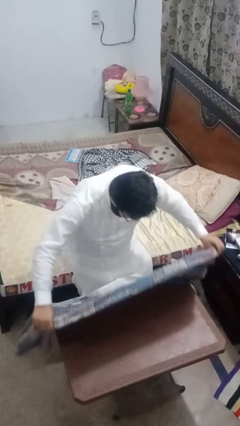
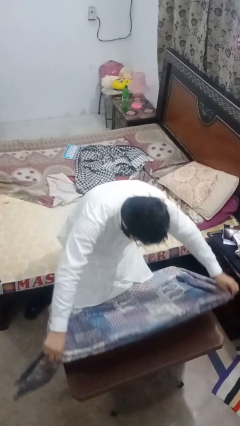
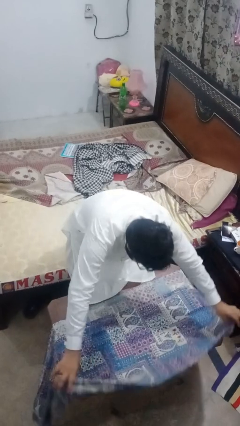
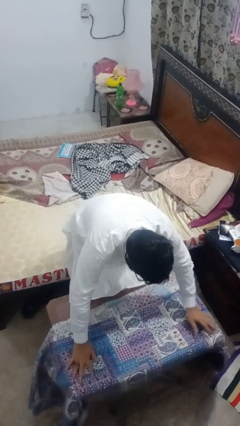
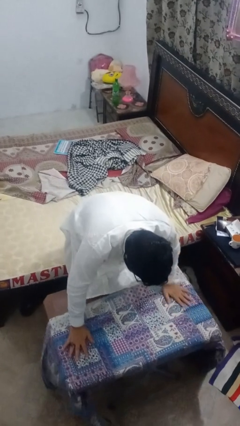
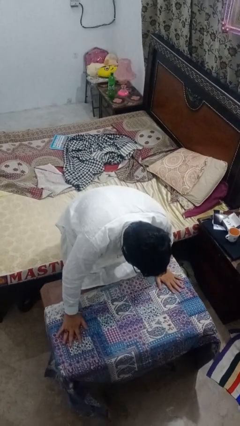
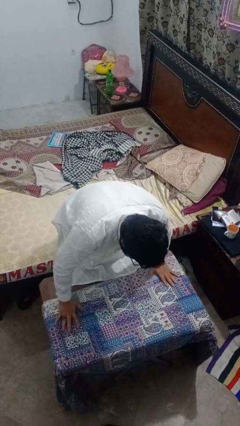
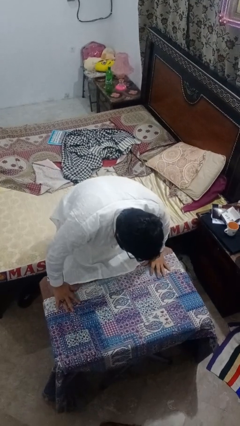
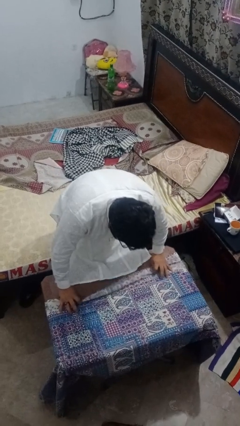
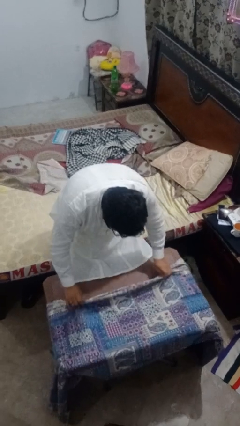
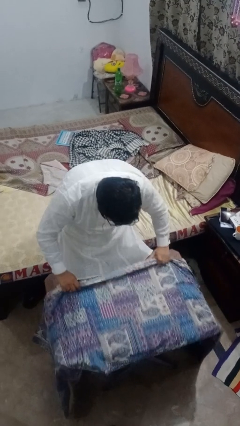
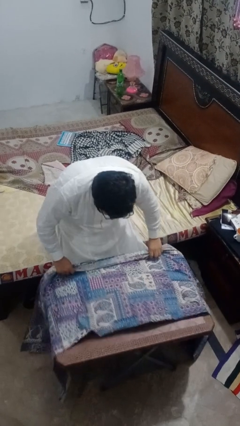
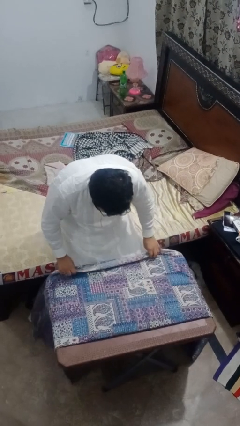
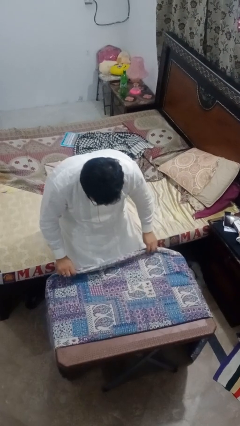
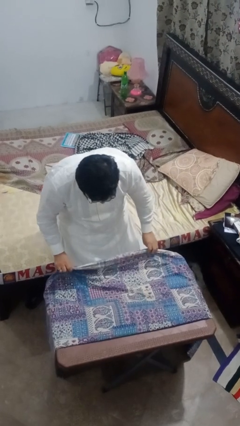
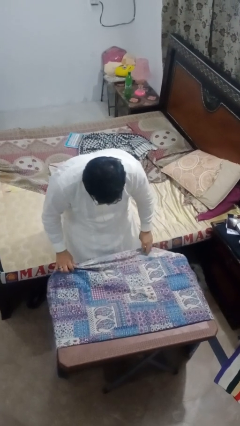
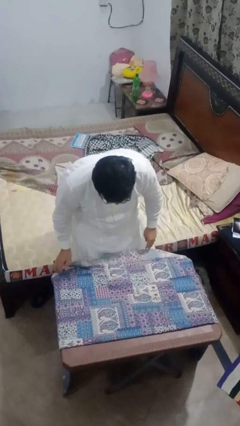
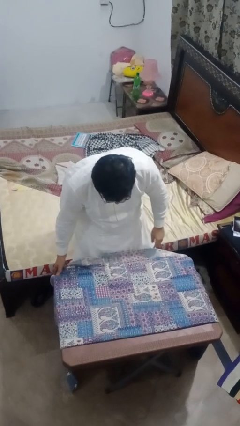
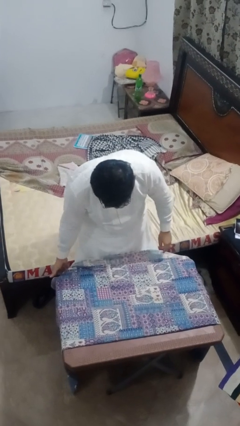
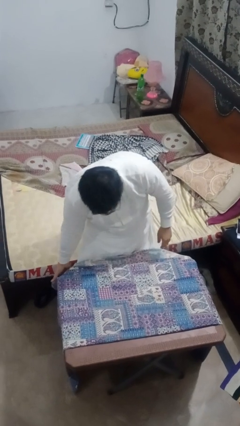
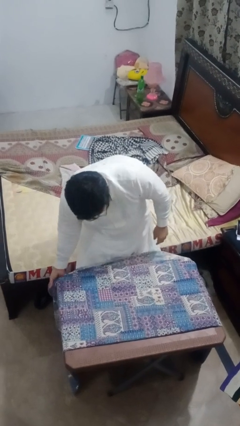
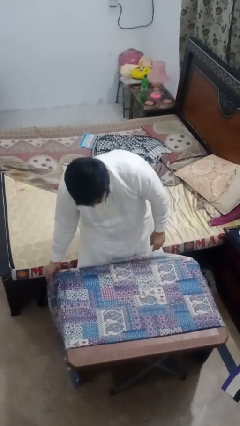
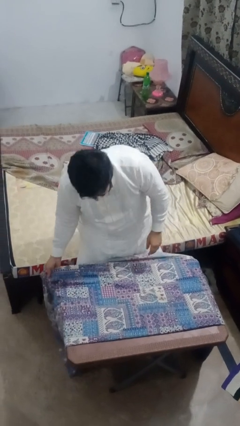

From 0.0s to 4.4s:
person spreads tablecloth

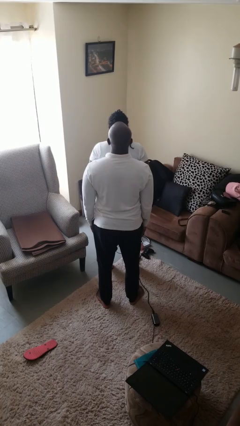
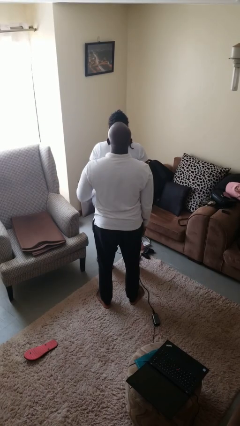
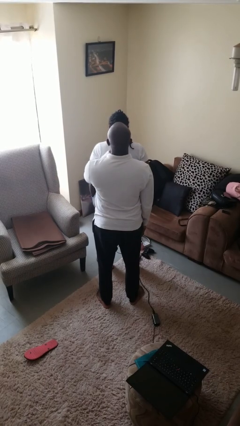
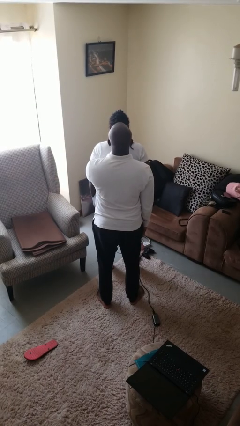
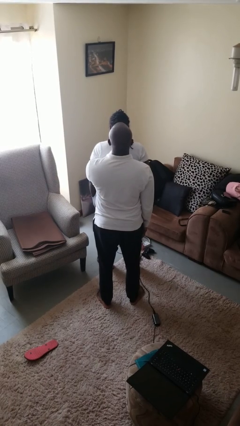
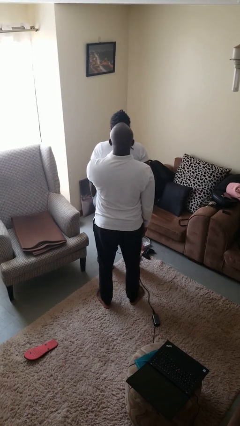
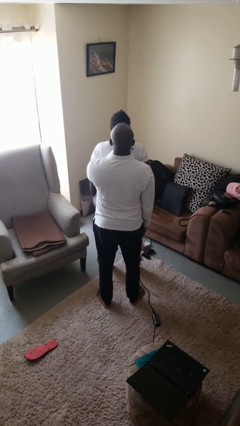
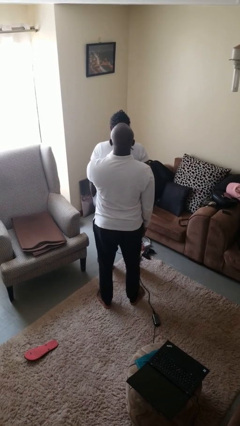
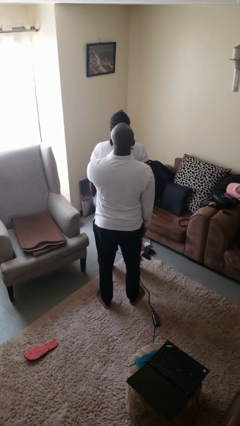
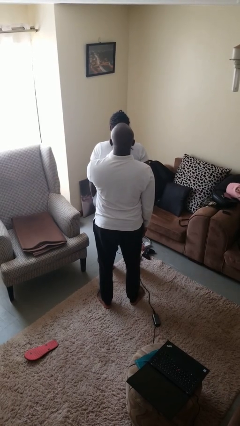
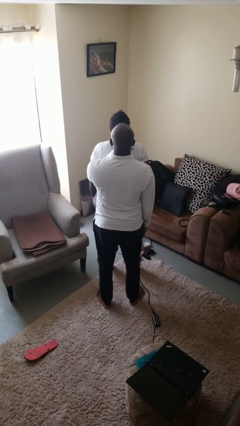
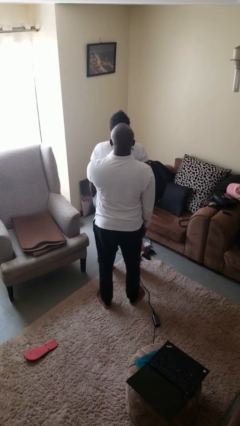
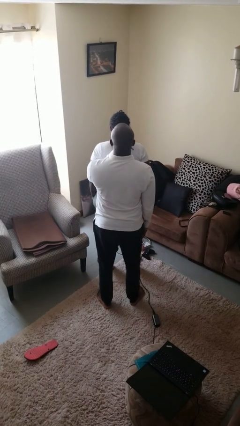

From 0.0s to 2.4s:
person grabs person by hair

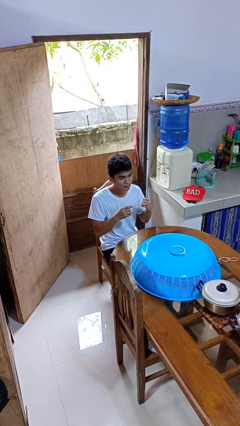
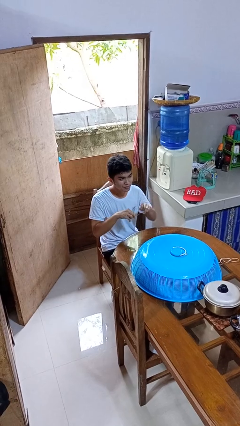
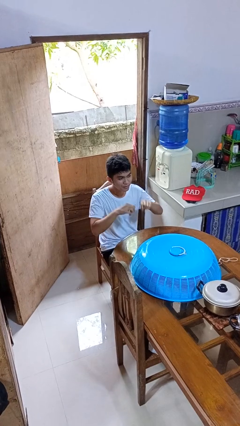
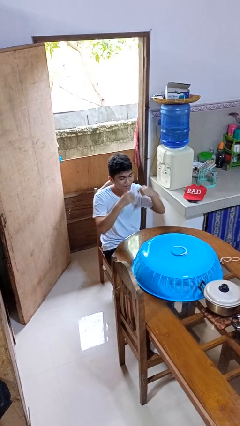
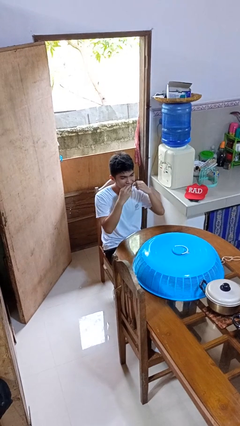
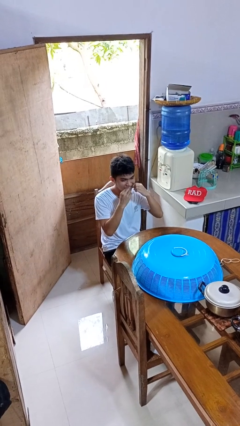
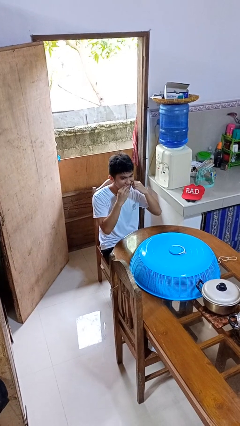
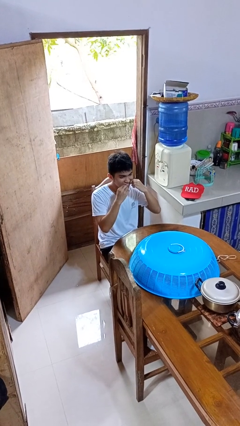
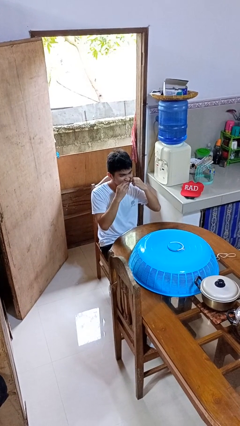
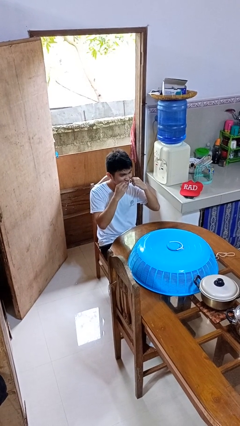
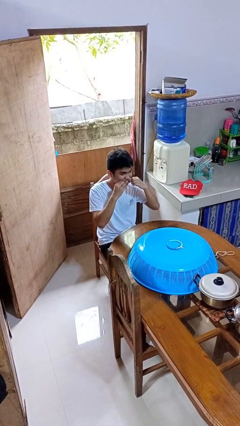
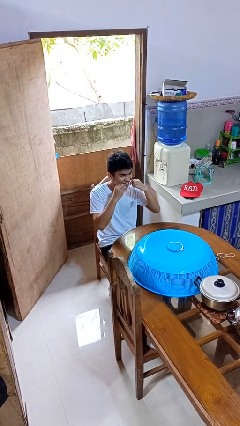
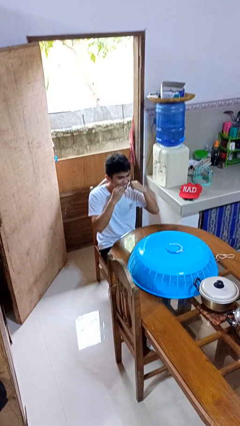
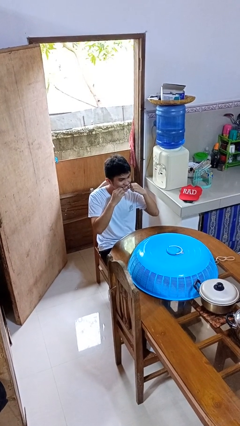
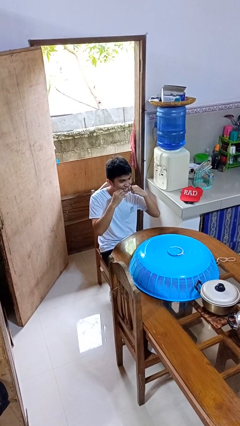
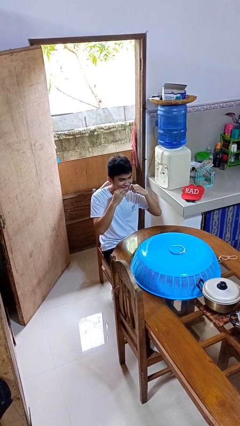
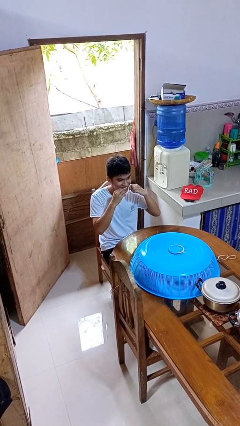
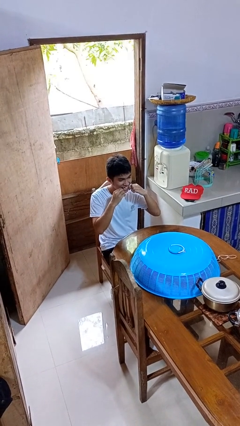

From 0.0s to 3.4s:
person flosses

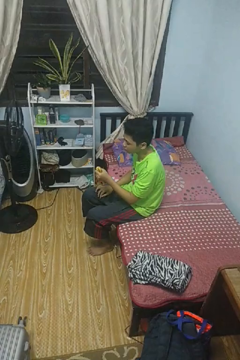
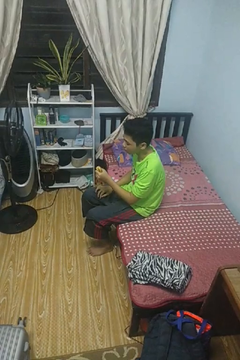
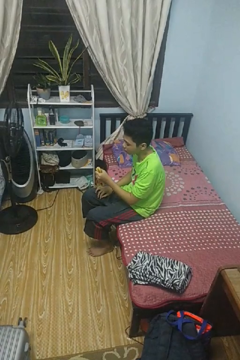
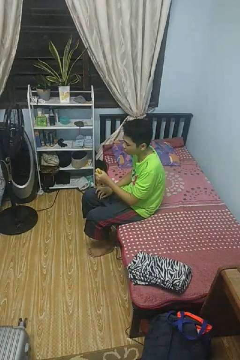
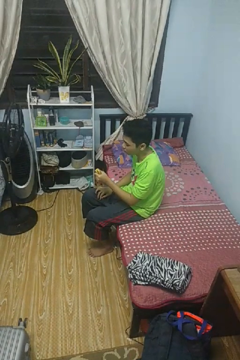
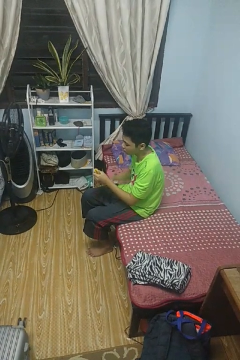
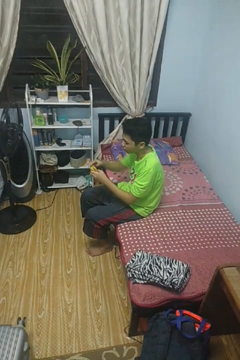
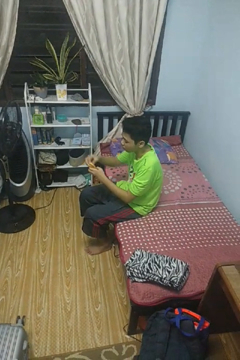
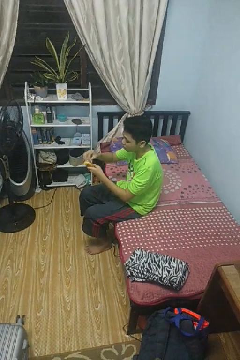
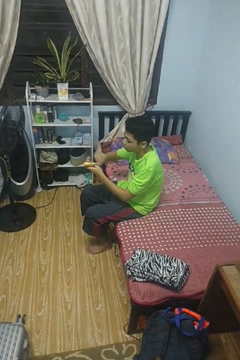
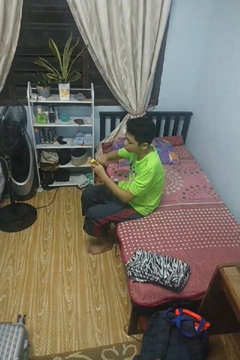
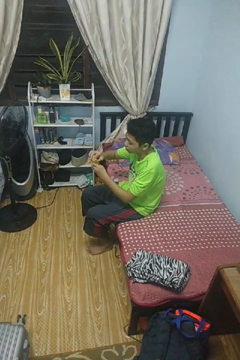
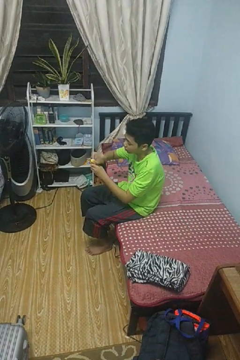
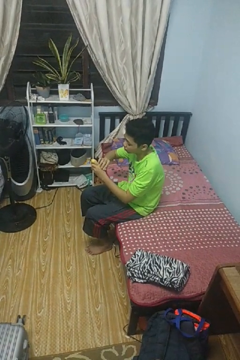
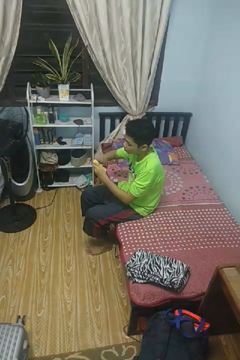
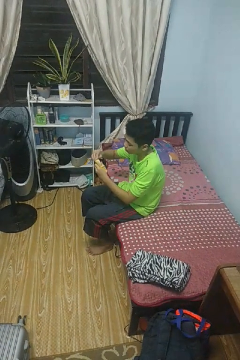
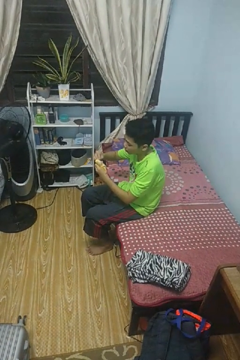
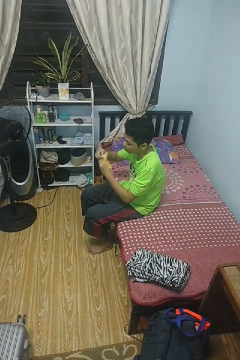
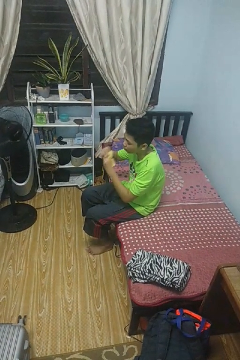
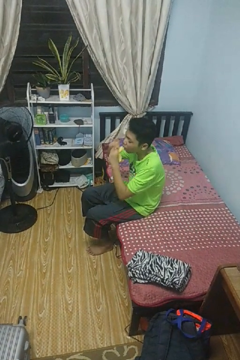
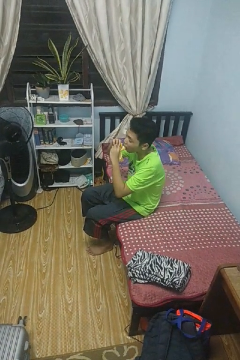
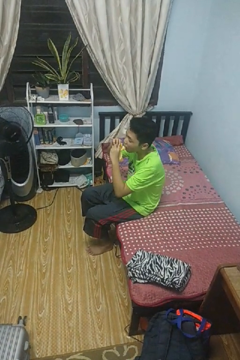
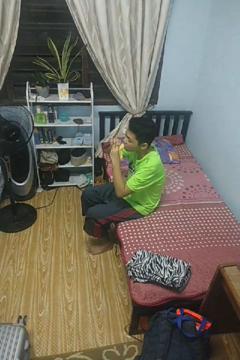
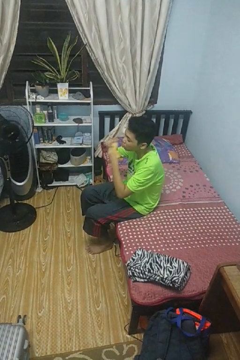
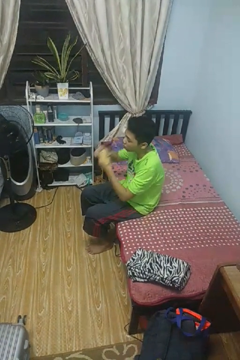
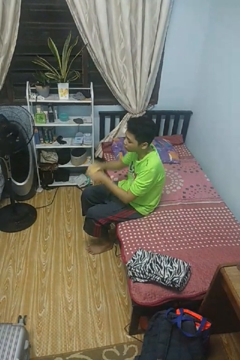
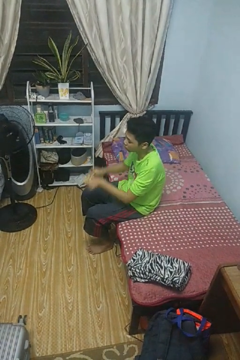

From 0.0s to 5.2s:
person eats banana

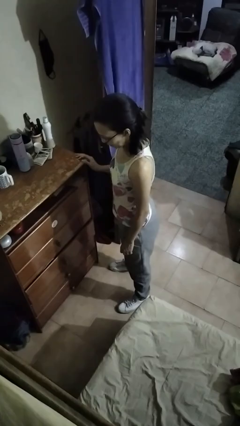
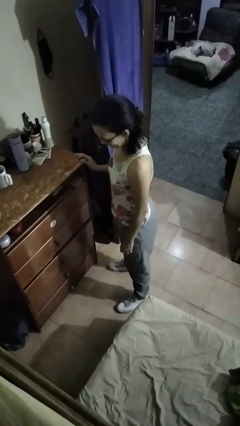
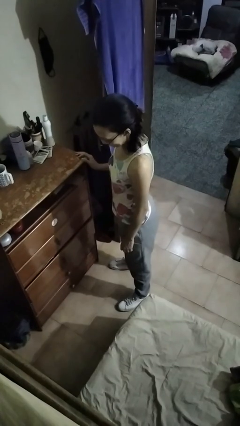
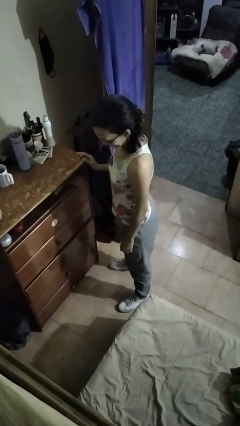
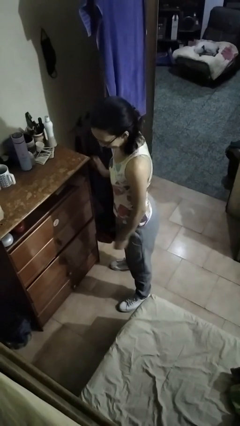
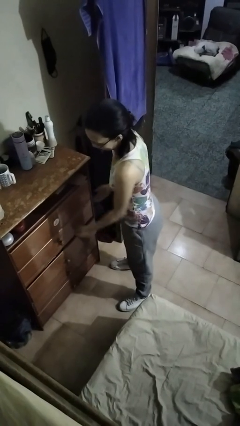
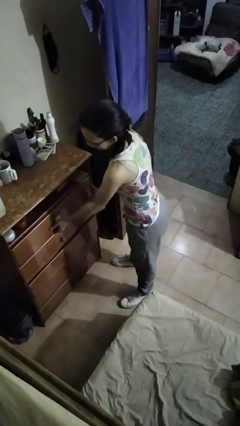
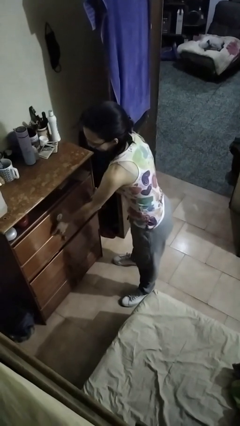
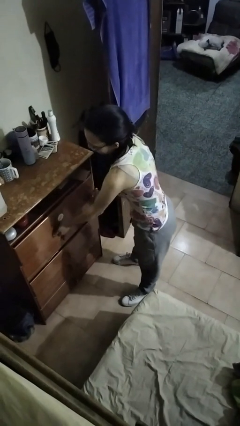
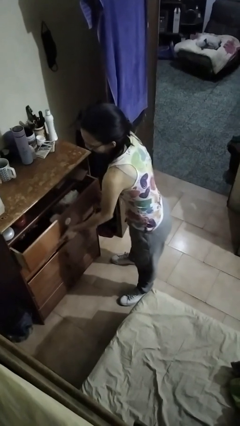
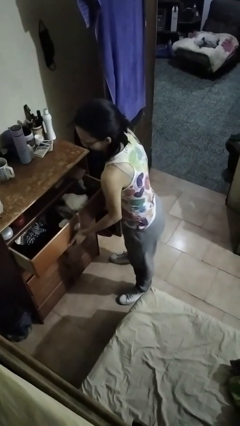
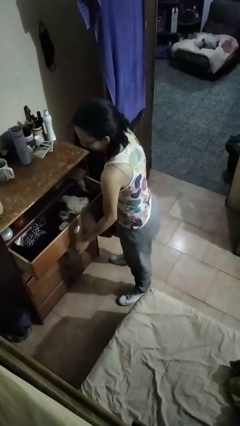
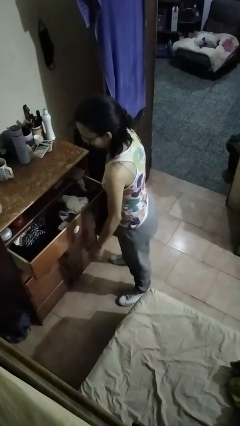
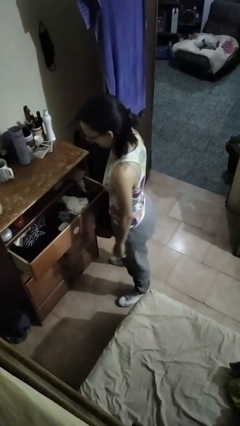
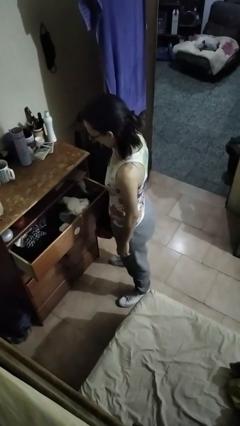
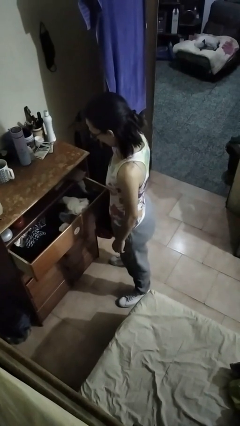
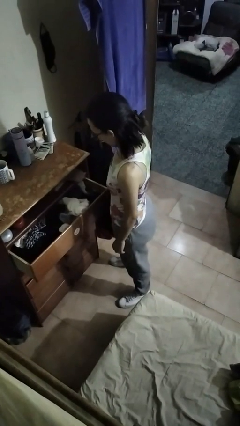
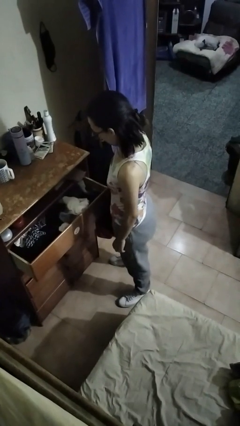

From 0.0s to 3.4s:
person opens dresser drawer
